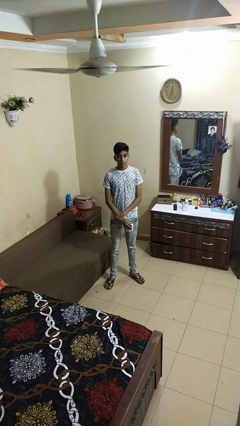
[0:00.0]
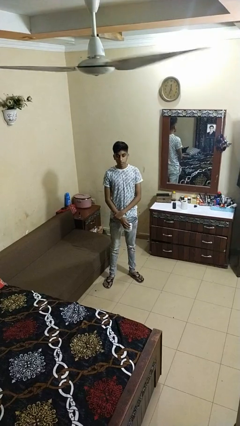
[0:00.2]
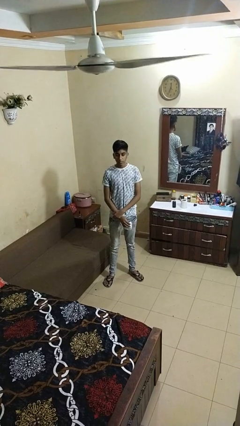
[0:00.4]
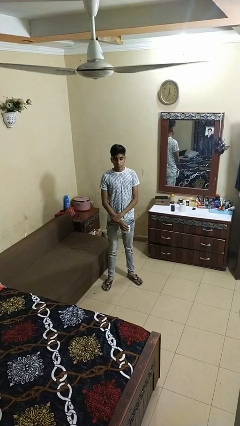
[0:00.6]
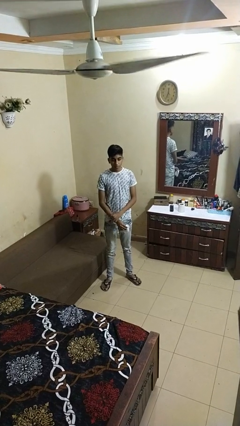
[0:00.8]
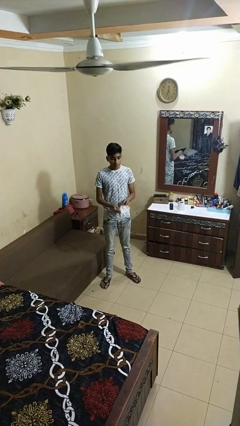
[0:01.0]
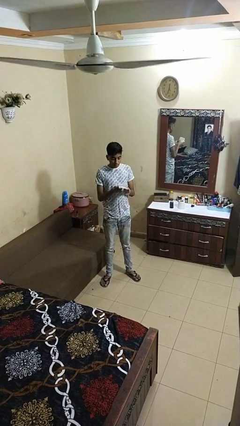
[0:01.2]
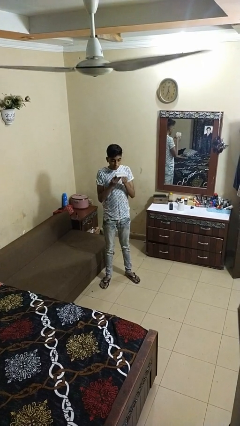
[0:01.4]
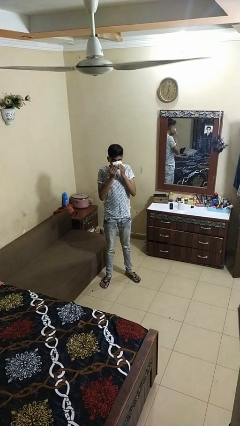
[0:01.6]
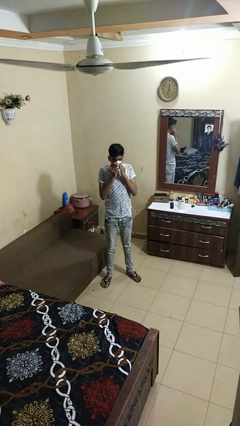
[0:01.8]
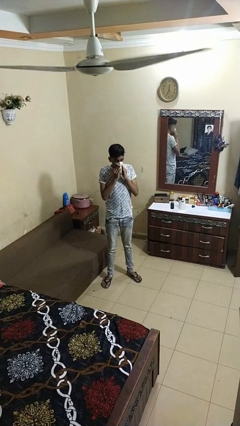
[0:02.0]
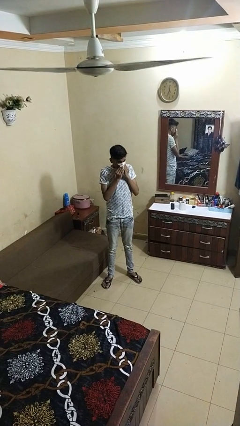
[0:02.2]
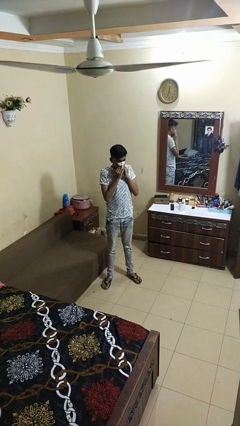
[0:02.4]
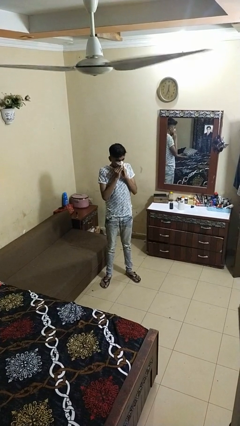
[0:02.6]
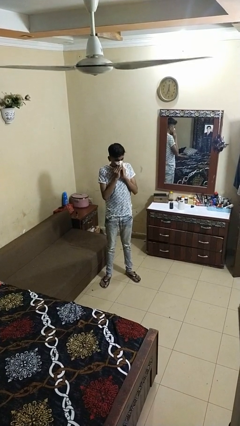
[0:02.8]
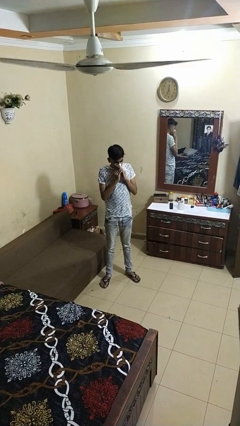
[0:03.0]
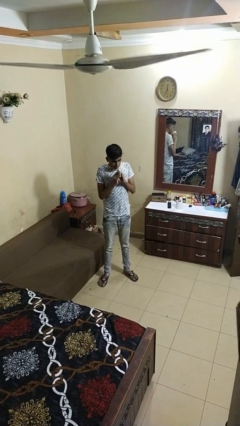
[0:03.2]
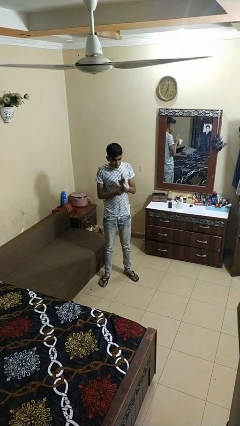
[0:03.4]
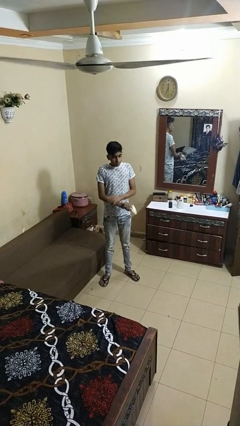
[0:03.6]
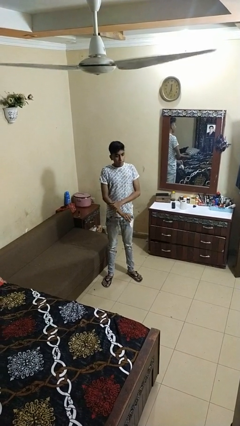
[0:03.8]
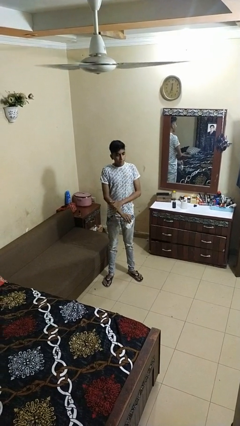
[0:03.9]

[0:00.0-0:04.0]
person blows nose

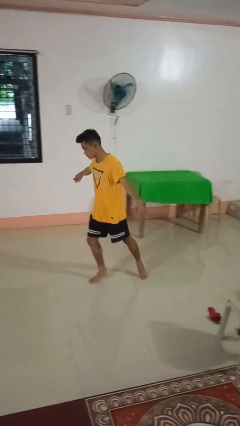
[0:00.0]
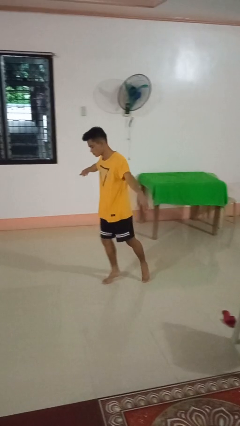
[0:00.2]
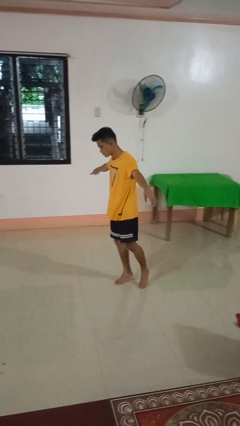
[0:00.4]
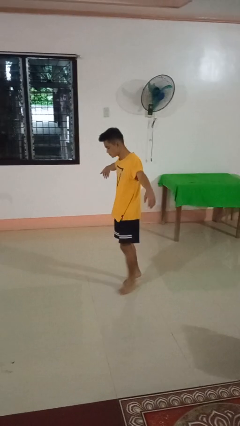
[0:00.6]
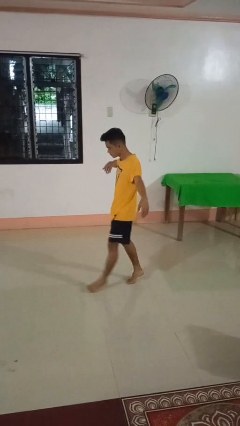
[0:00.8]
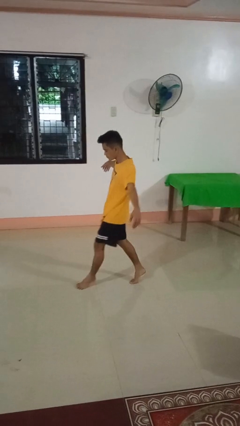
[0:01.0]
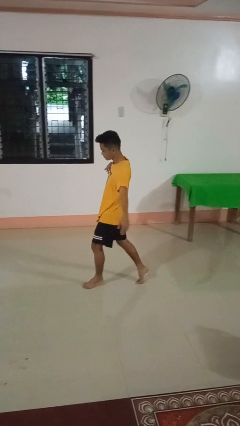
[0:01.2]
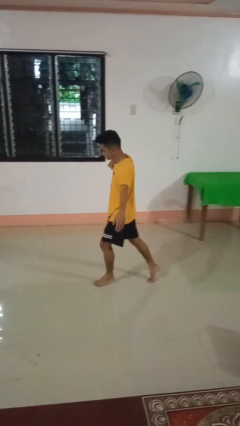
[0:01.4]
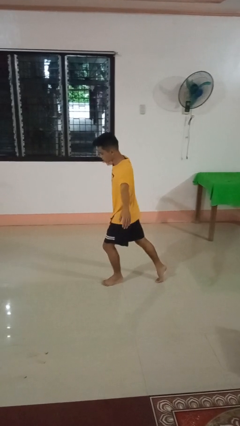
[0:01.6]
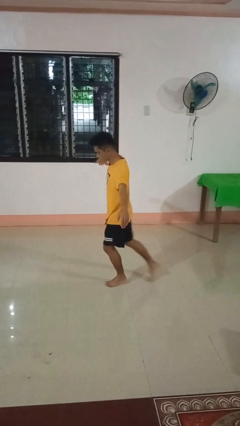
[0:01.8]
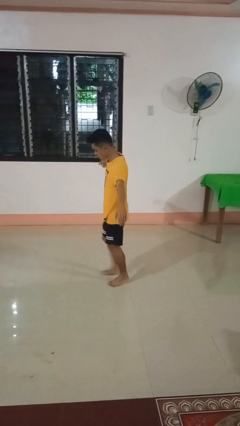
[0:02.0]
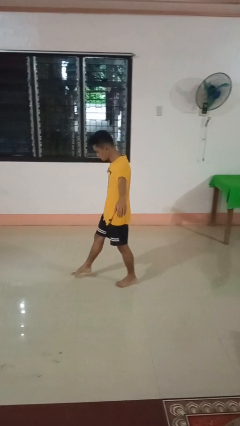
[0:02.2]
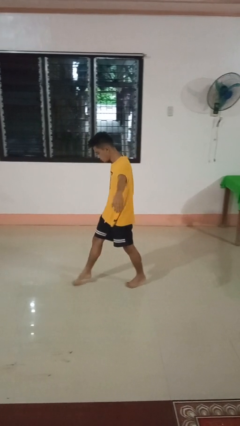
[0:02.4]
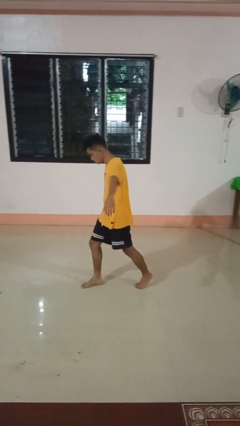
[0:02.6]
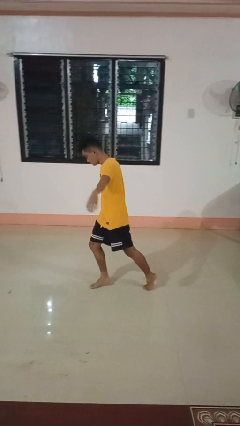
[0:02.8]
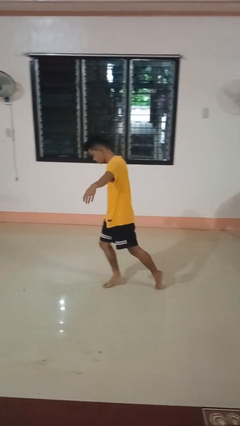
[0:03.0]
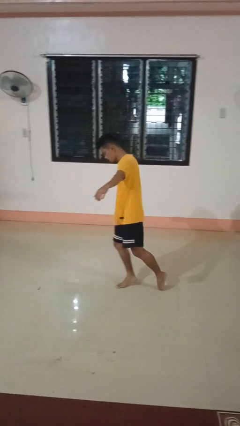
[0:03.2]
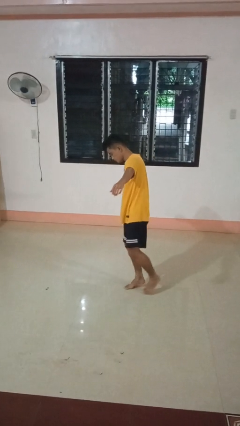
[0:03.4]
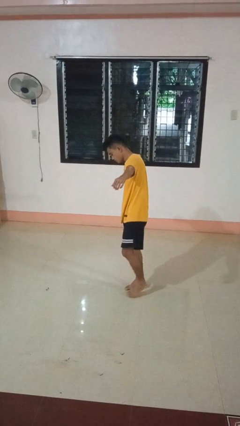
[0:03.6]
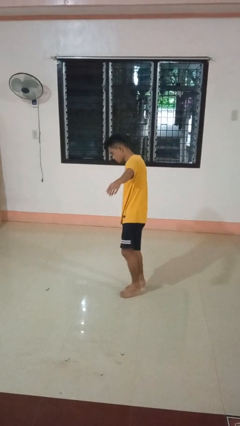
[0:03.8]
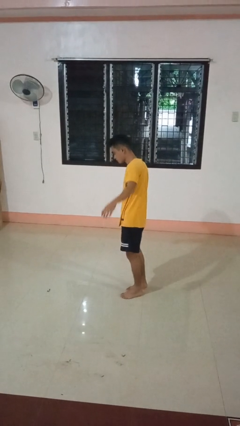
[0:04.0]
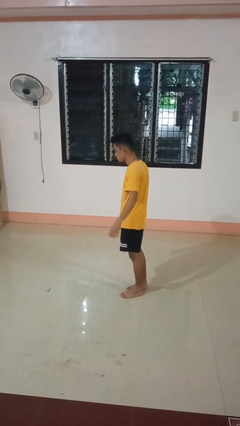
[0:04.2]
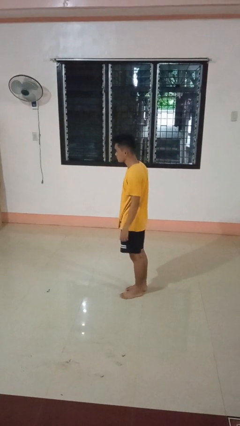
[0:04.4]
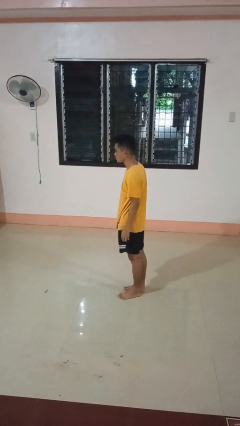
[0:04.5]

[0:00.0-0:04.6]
person walks tiptoe

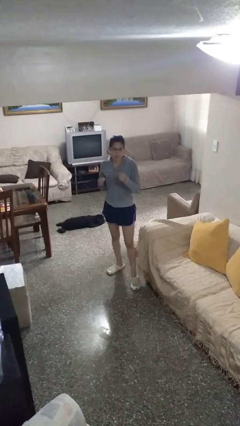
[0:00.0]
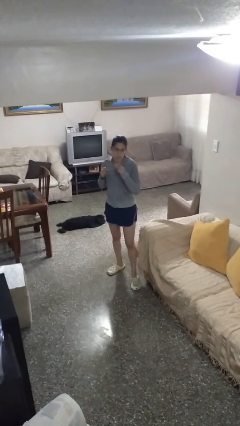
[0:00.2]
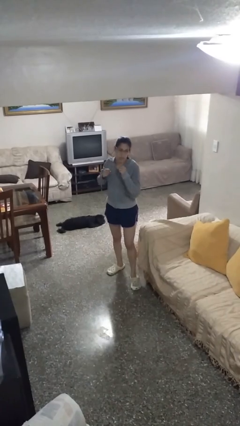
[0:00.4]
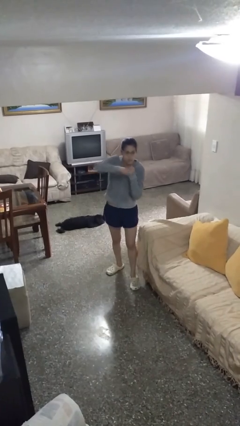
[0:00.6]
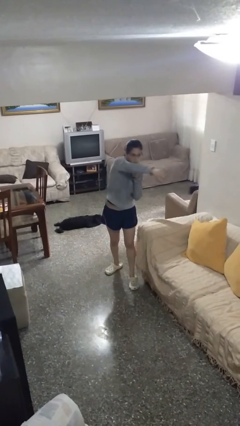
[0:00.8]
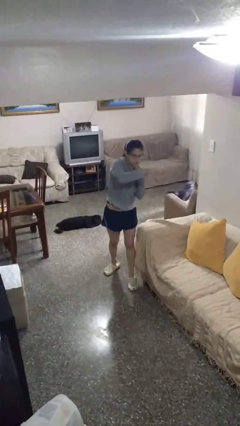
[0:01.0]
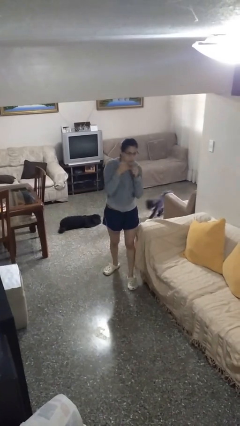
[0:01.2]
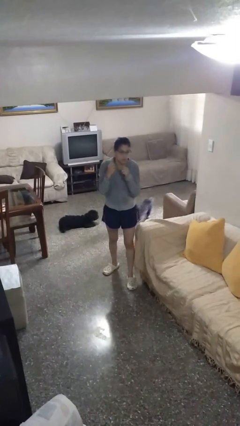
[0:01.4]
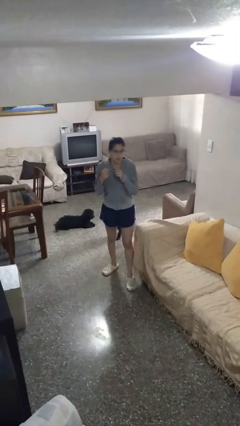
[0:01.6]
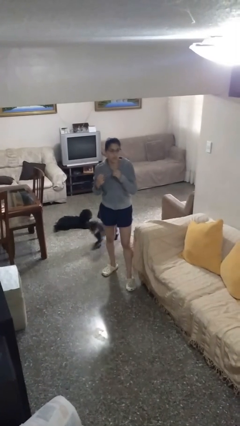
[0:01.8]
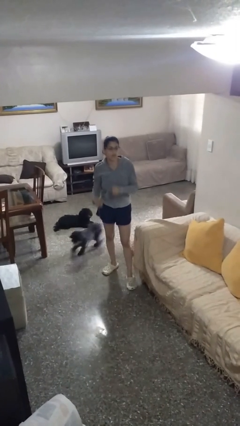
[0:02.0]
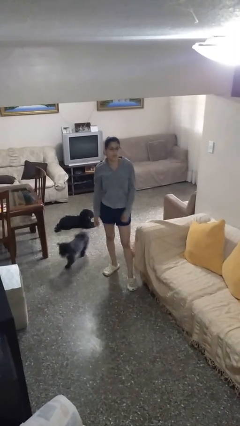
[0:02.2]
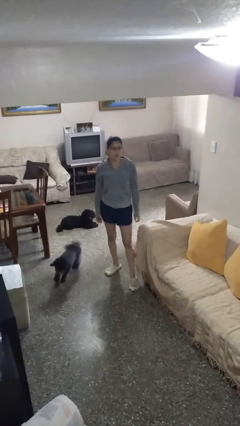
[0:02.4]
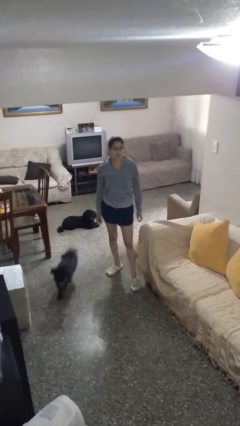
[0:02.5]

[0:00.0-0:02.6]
person punches

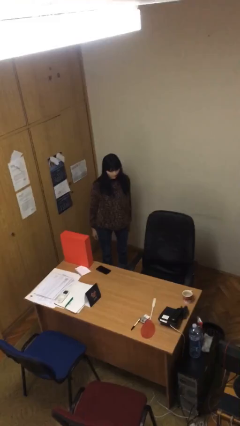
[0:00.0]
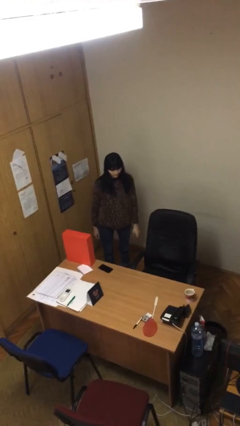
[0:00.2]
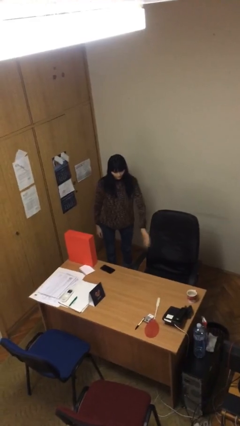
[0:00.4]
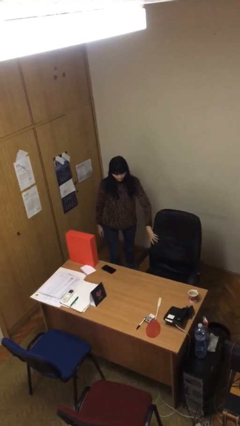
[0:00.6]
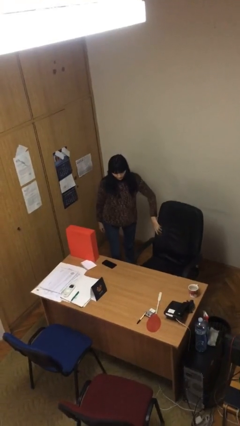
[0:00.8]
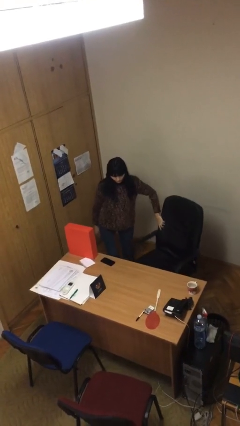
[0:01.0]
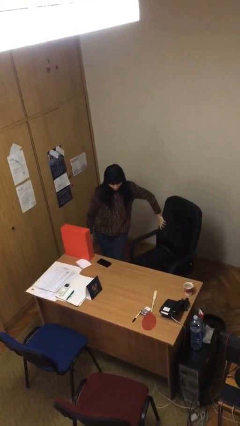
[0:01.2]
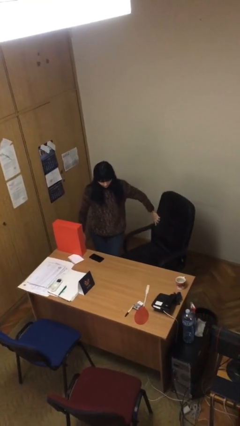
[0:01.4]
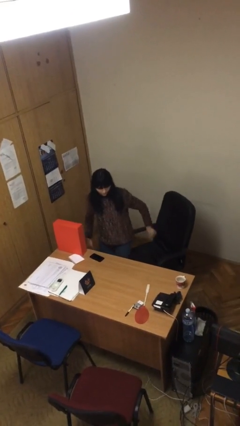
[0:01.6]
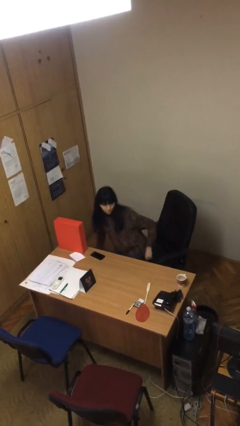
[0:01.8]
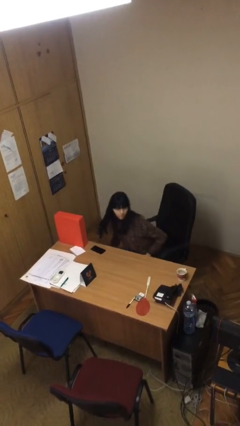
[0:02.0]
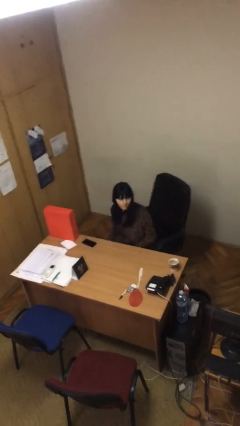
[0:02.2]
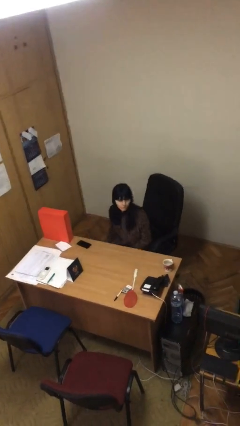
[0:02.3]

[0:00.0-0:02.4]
person sits down

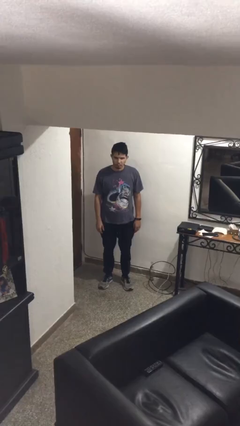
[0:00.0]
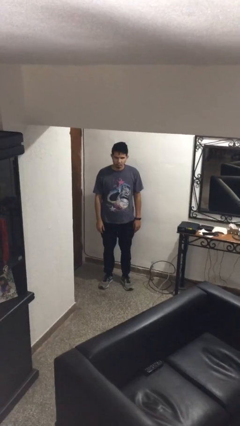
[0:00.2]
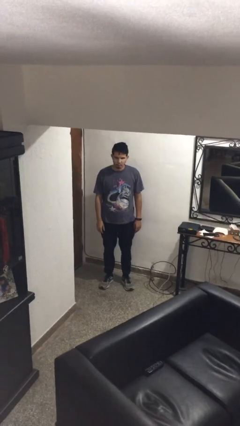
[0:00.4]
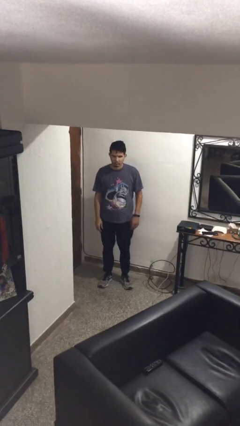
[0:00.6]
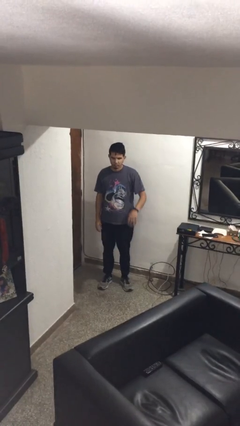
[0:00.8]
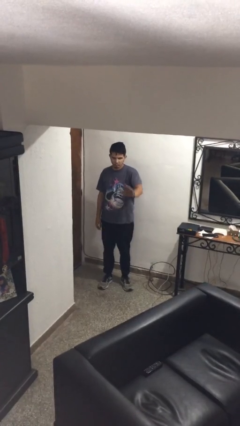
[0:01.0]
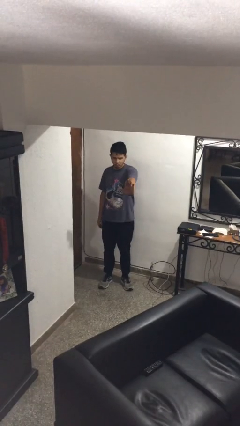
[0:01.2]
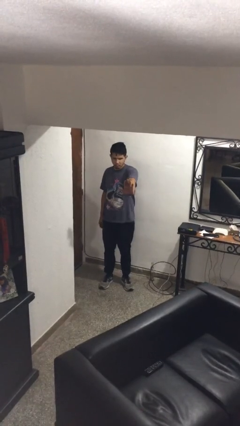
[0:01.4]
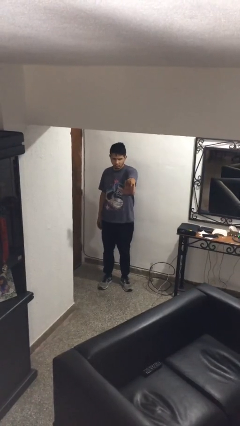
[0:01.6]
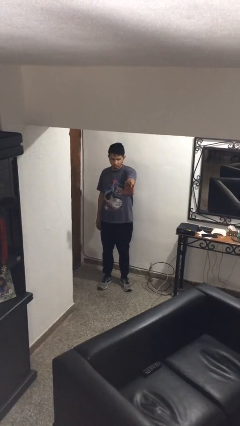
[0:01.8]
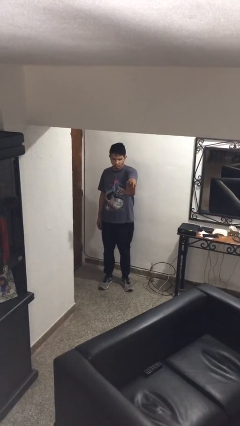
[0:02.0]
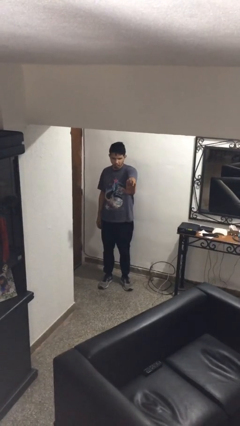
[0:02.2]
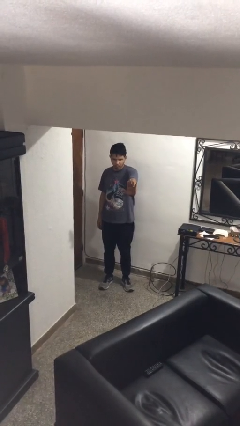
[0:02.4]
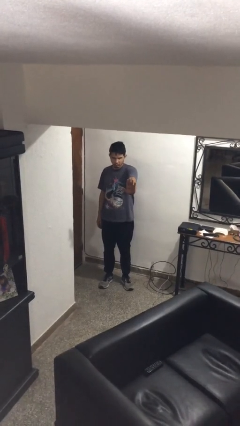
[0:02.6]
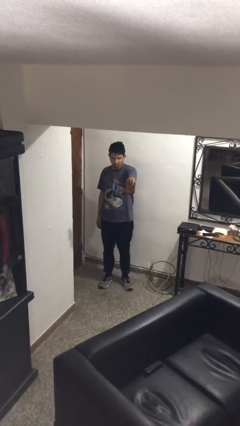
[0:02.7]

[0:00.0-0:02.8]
person gestures stop

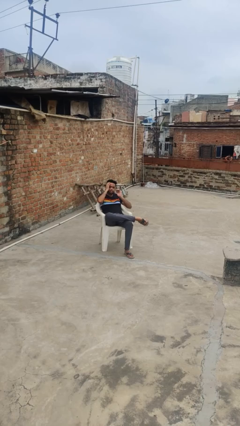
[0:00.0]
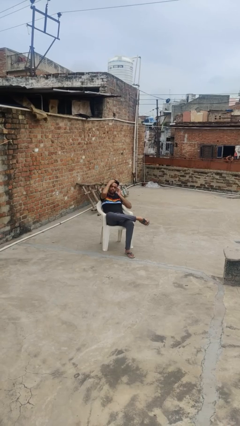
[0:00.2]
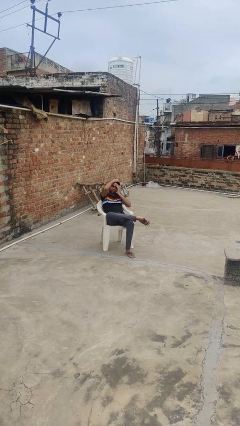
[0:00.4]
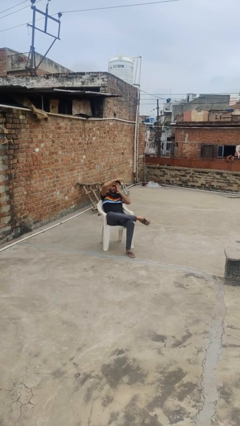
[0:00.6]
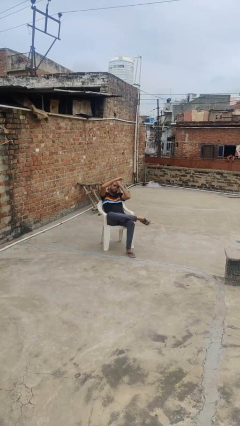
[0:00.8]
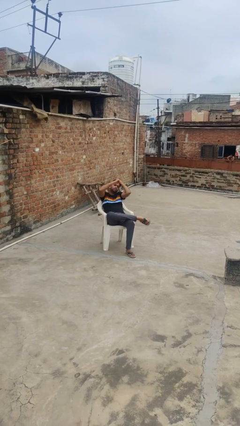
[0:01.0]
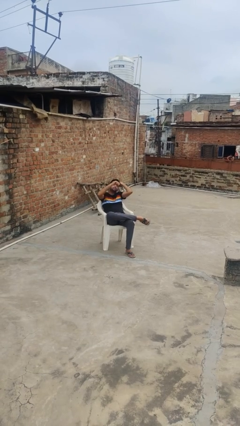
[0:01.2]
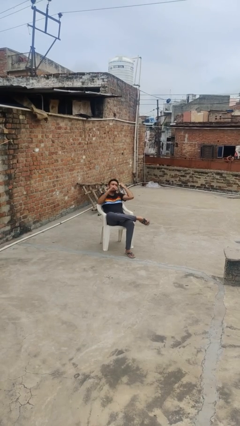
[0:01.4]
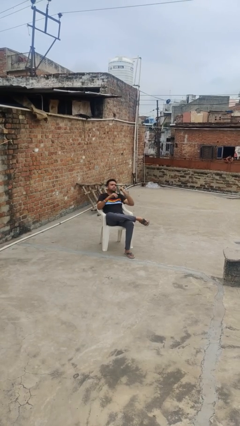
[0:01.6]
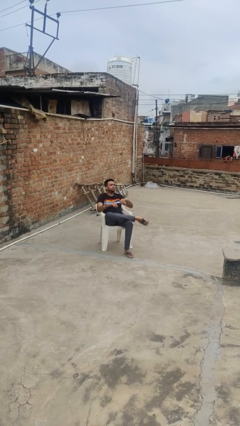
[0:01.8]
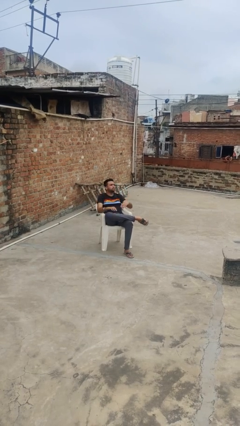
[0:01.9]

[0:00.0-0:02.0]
person strokes hair
